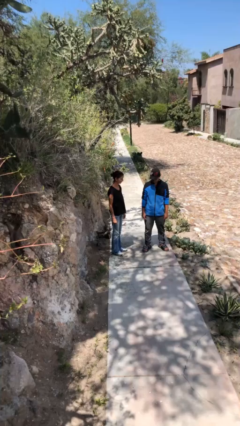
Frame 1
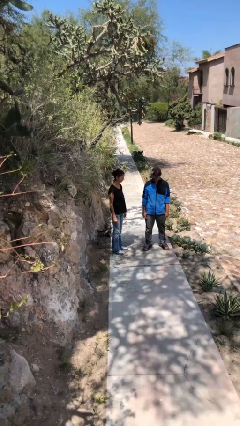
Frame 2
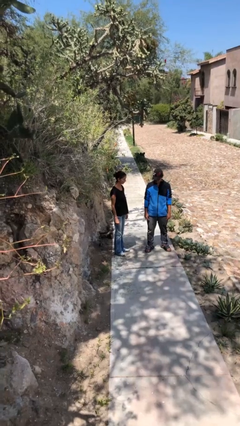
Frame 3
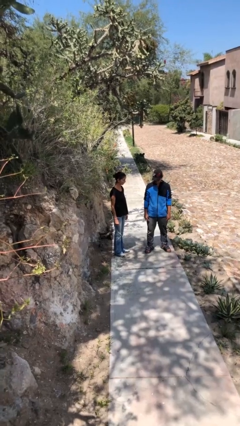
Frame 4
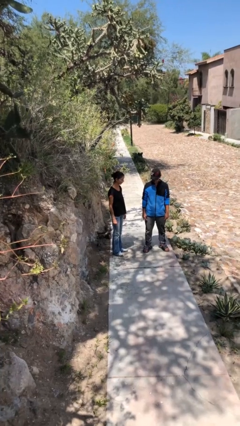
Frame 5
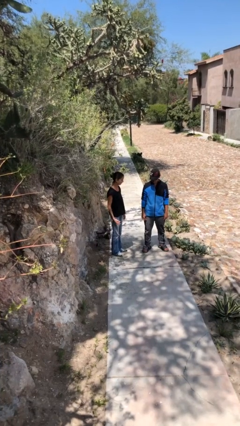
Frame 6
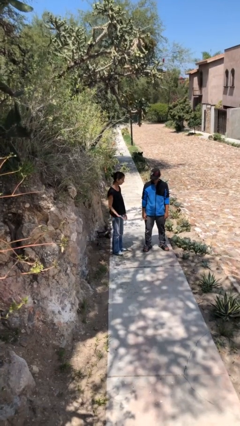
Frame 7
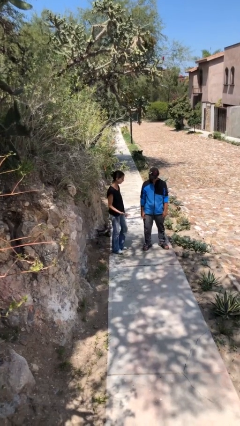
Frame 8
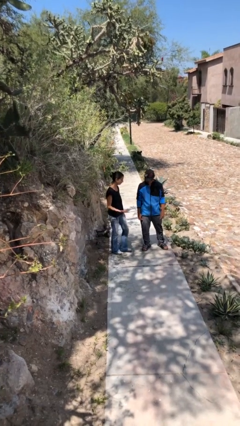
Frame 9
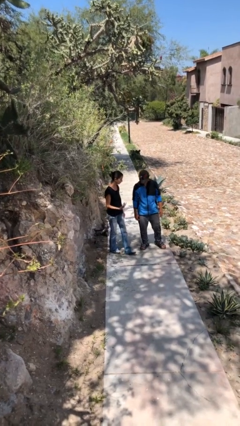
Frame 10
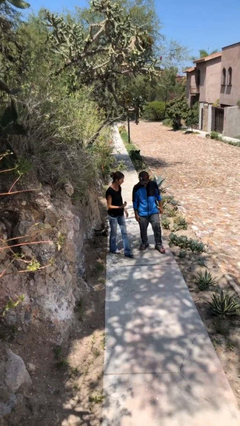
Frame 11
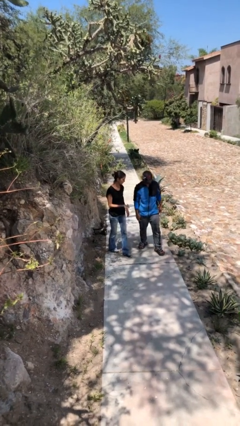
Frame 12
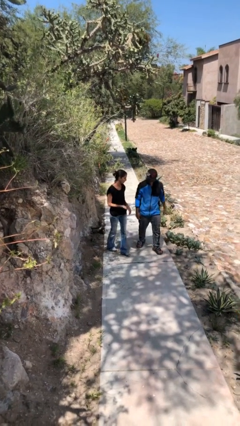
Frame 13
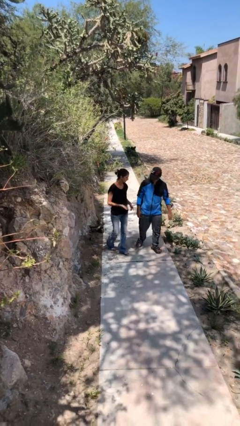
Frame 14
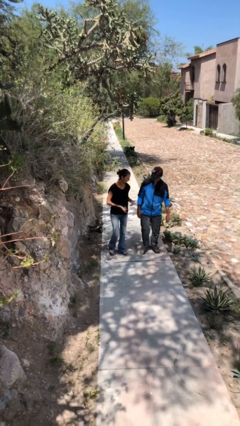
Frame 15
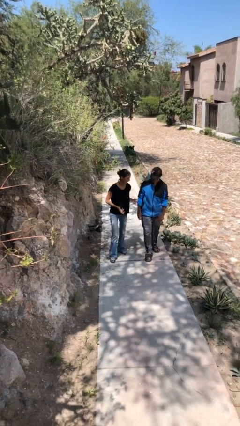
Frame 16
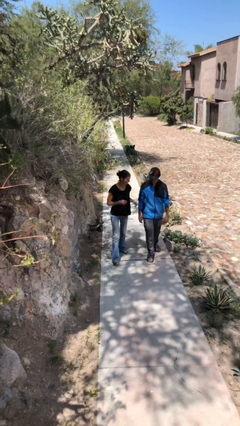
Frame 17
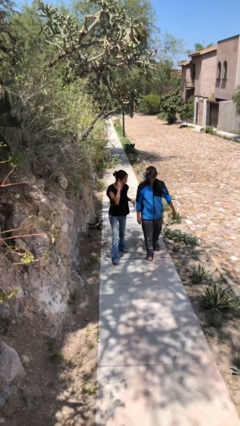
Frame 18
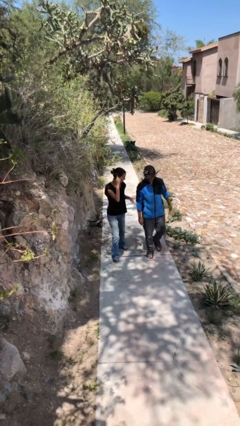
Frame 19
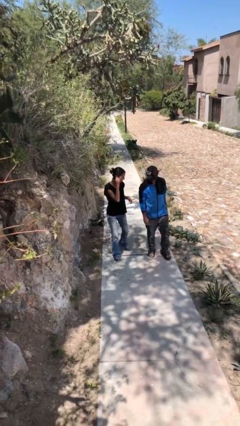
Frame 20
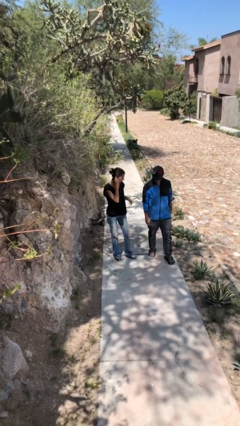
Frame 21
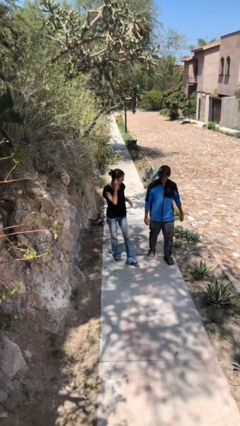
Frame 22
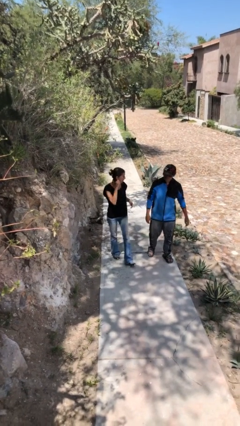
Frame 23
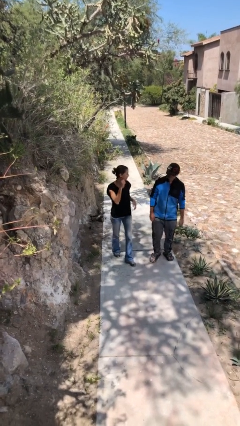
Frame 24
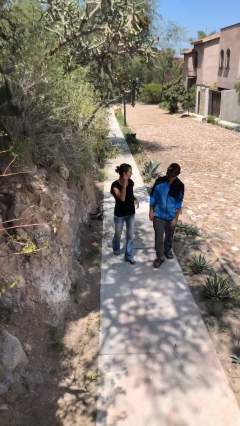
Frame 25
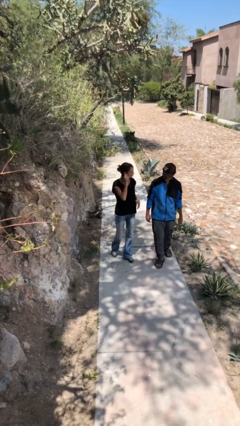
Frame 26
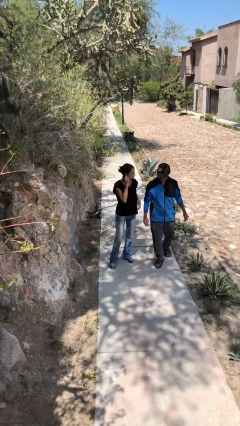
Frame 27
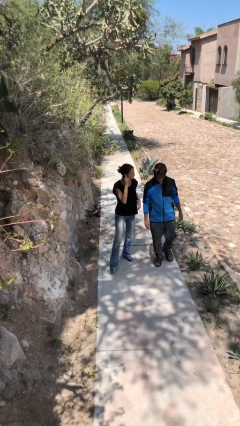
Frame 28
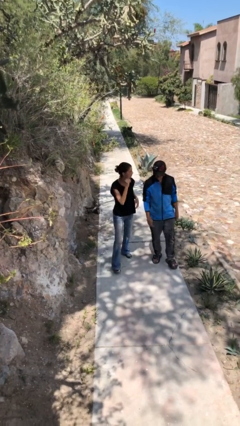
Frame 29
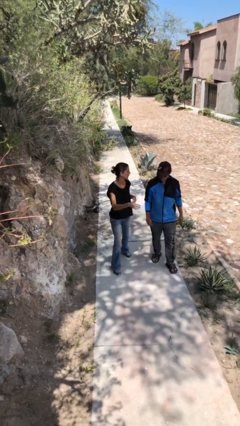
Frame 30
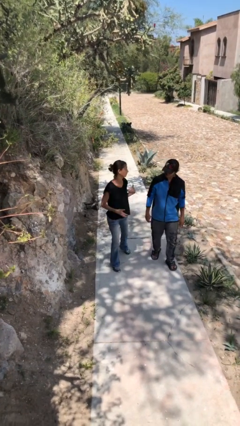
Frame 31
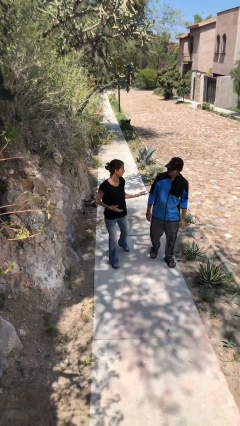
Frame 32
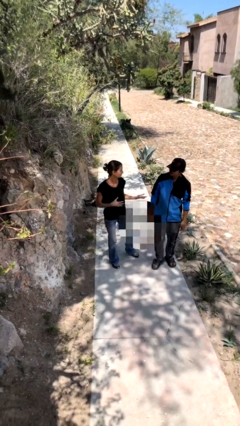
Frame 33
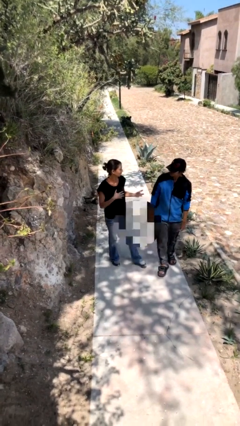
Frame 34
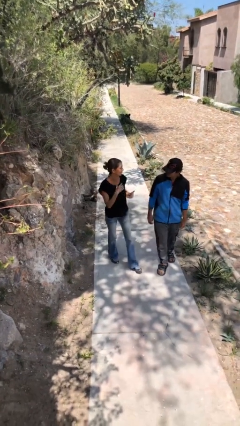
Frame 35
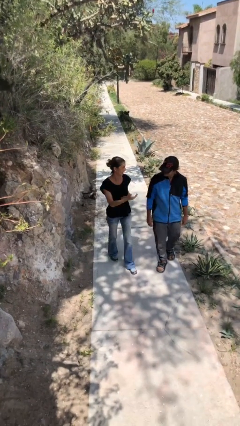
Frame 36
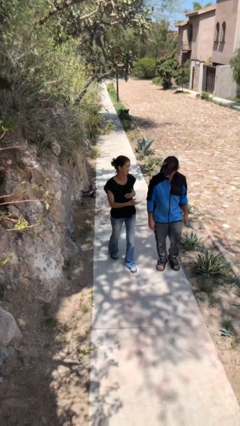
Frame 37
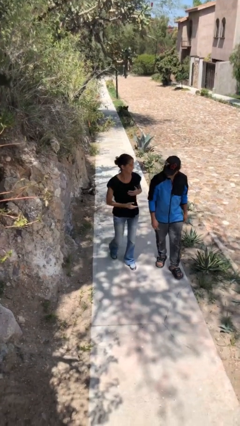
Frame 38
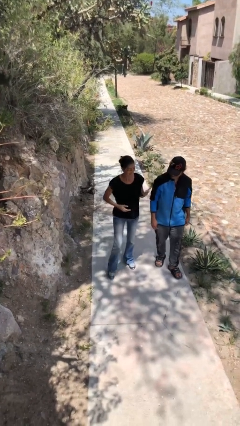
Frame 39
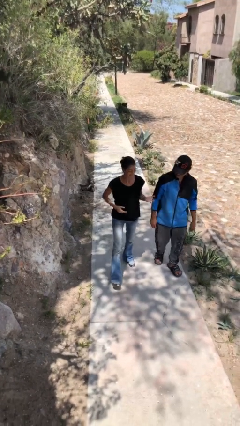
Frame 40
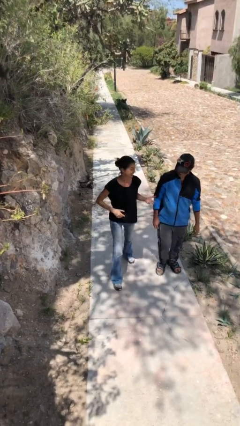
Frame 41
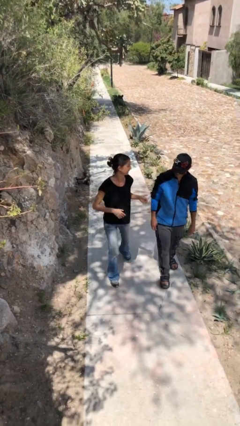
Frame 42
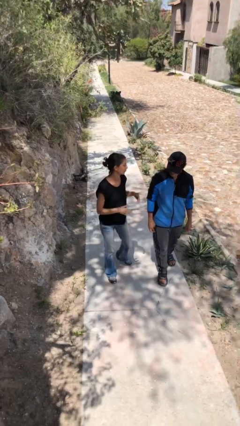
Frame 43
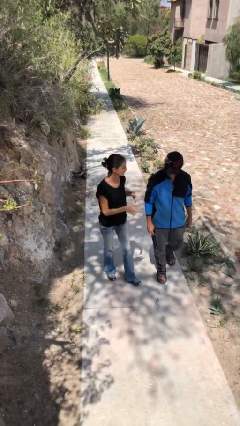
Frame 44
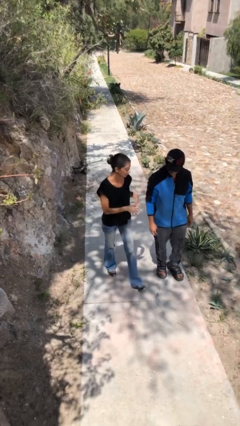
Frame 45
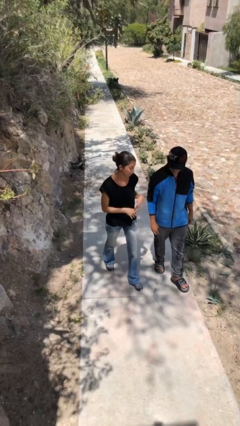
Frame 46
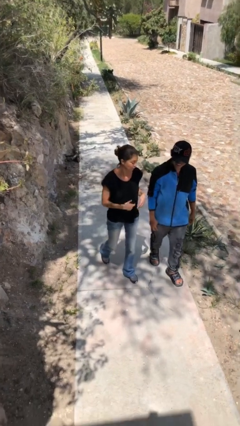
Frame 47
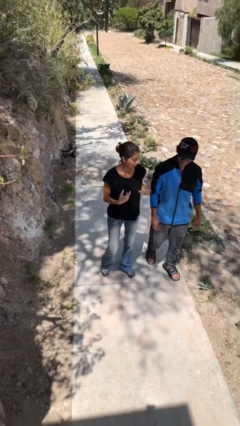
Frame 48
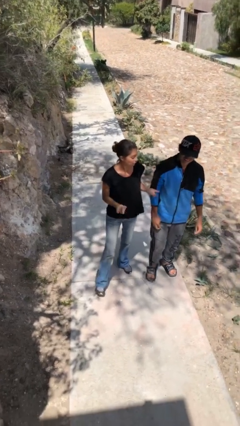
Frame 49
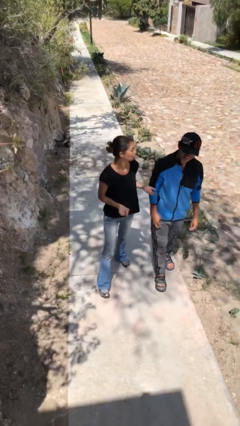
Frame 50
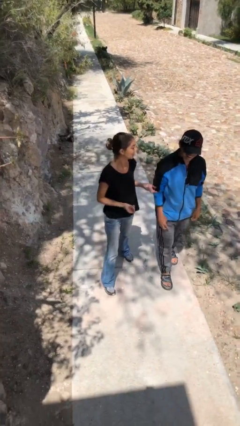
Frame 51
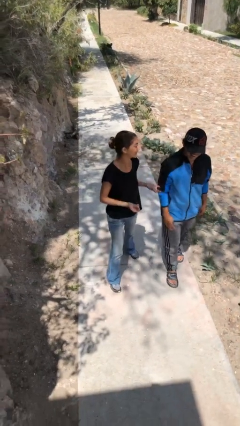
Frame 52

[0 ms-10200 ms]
person talks to person

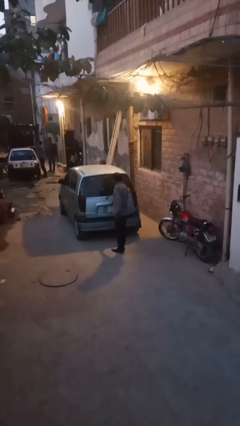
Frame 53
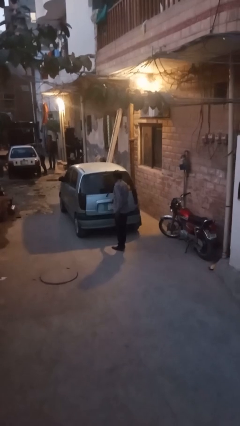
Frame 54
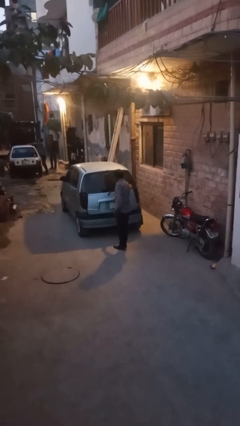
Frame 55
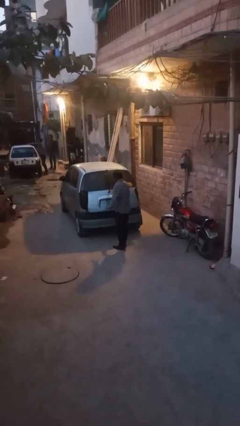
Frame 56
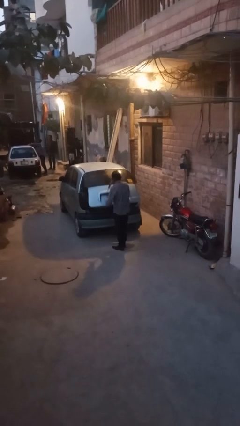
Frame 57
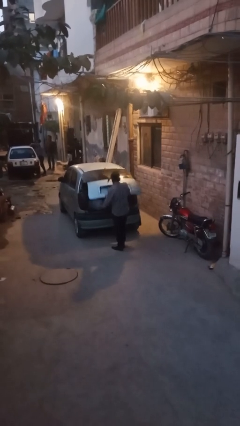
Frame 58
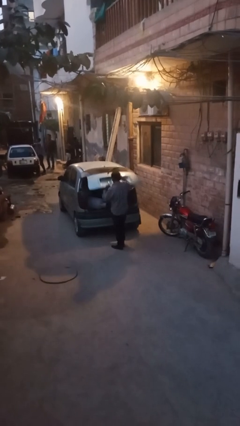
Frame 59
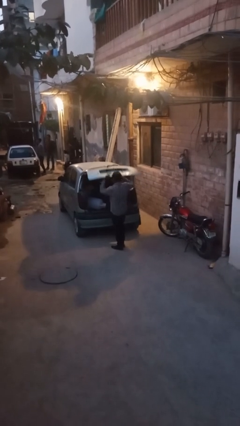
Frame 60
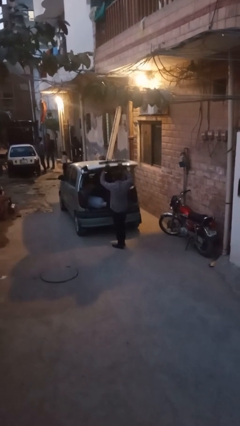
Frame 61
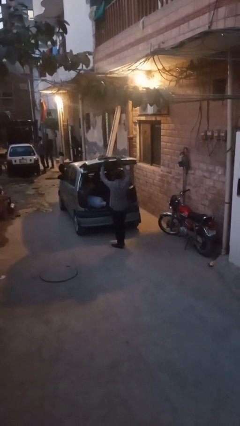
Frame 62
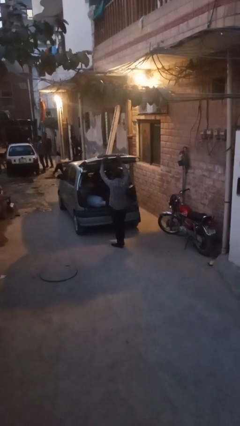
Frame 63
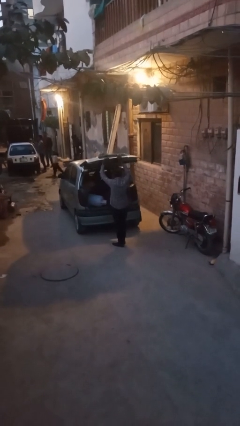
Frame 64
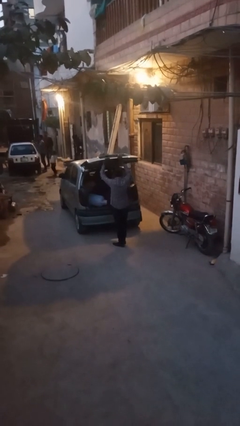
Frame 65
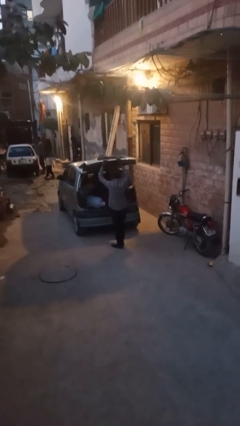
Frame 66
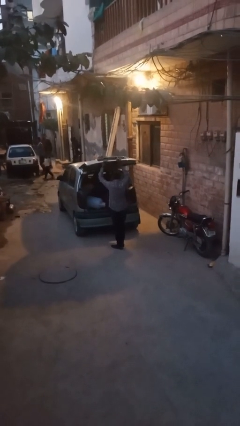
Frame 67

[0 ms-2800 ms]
person opens car trunk

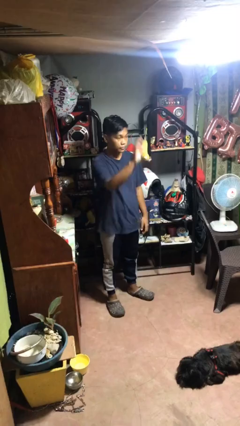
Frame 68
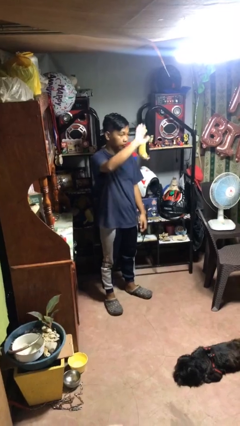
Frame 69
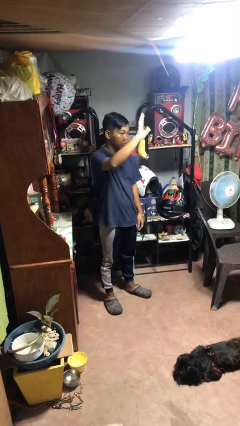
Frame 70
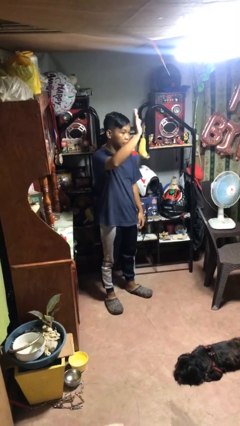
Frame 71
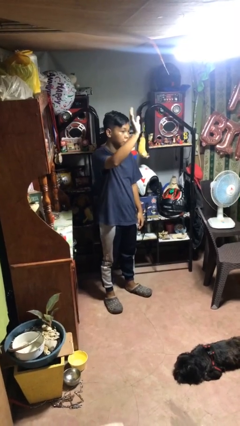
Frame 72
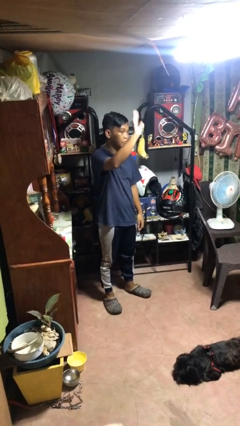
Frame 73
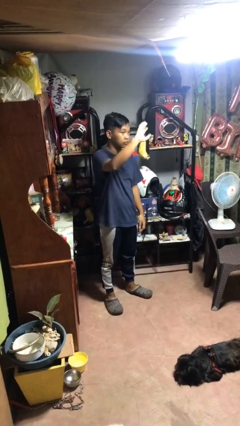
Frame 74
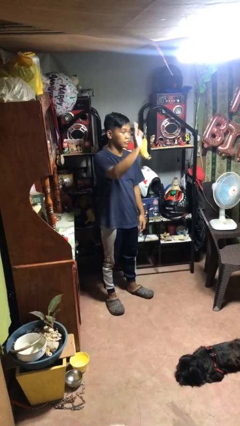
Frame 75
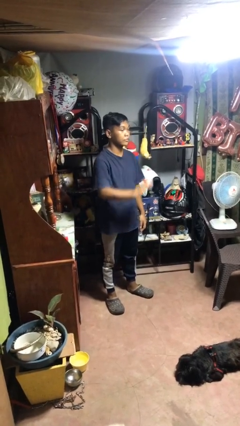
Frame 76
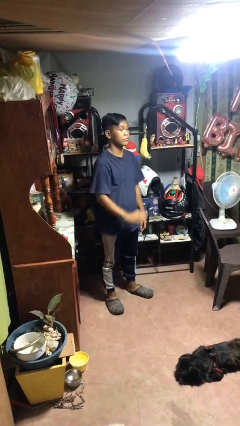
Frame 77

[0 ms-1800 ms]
person waves at person

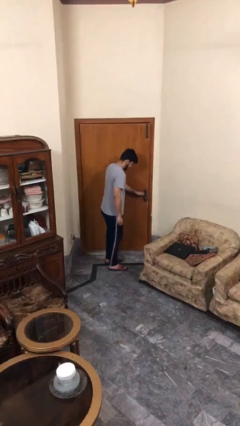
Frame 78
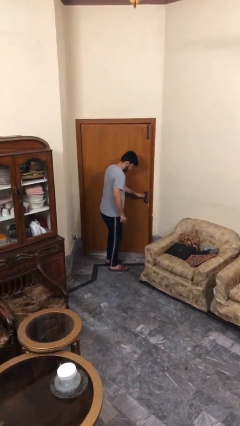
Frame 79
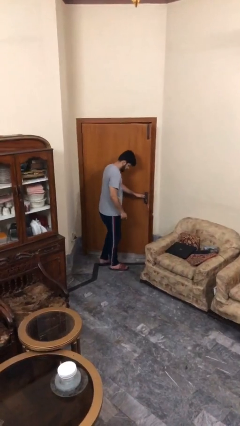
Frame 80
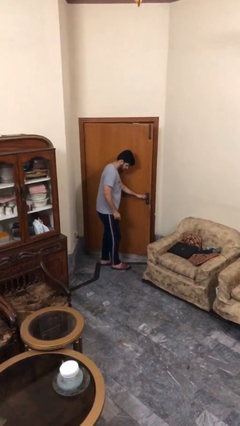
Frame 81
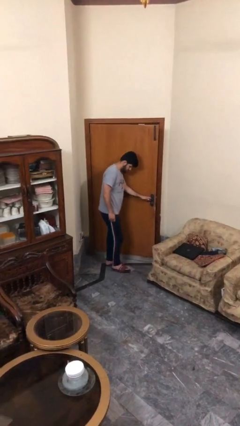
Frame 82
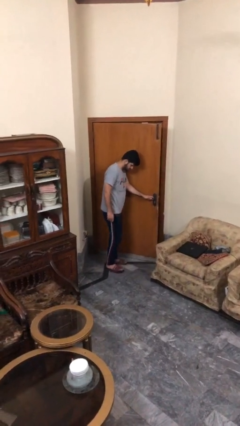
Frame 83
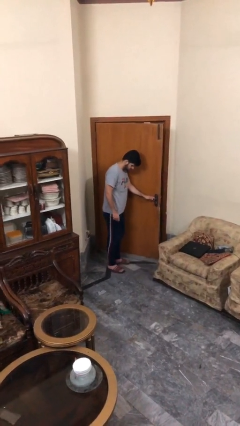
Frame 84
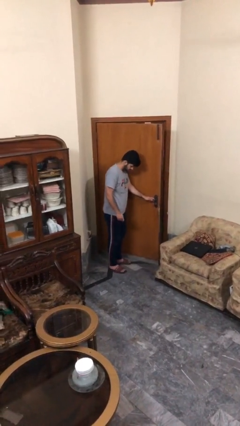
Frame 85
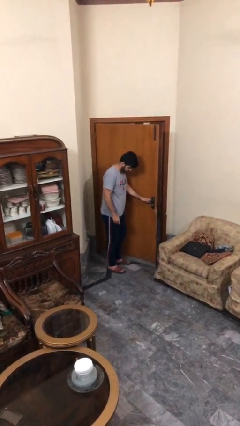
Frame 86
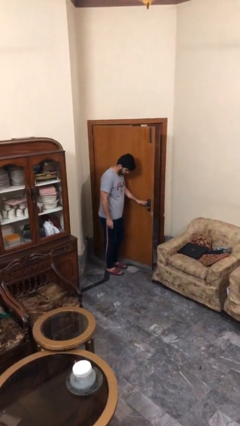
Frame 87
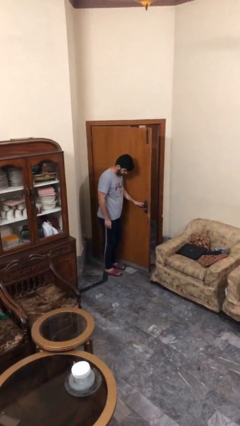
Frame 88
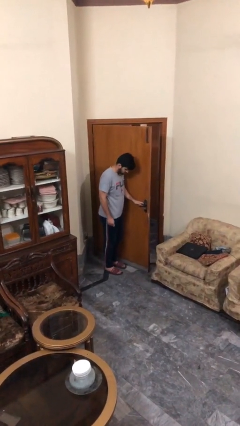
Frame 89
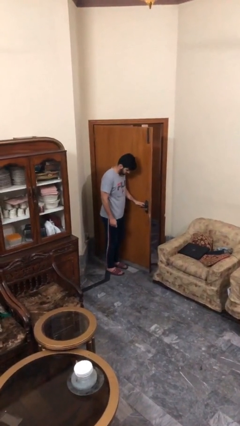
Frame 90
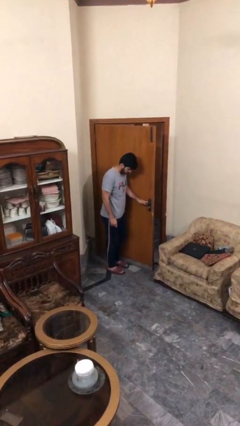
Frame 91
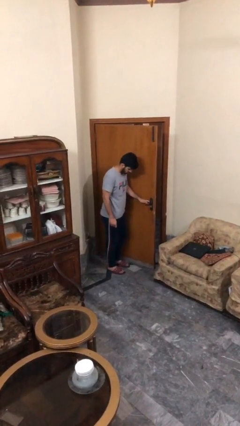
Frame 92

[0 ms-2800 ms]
person opens facility door

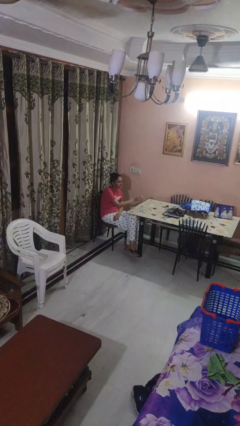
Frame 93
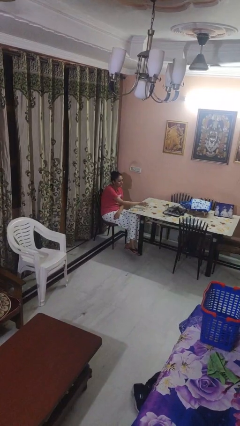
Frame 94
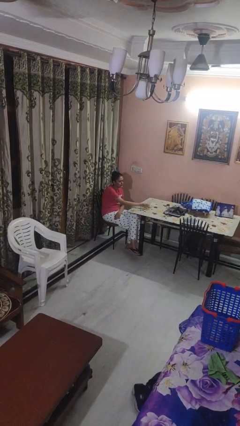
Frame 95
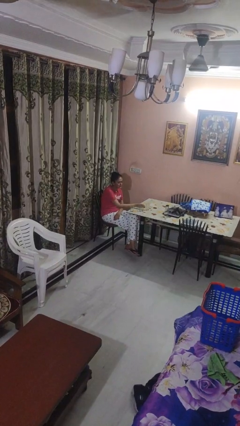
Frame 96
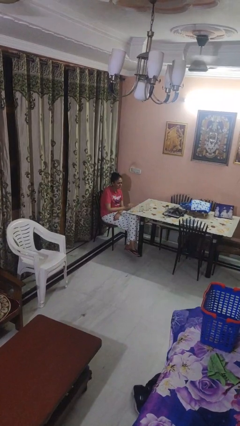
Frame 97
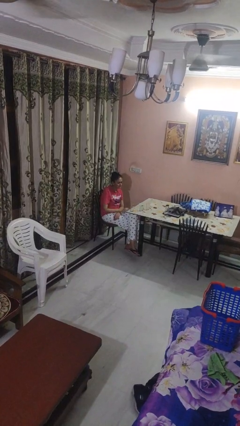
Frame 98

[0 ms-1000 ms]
person puts down object on table
